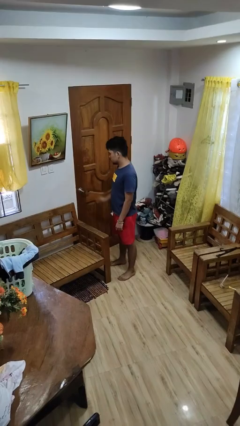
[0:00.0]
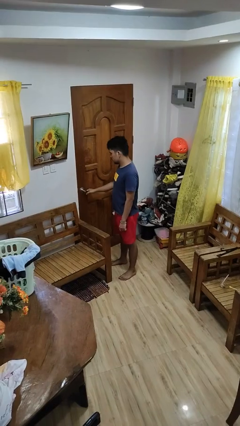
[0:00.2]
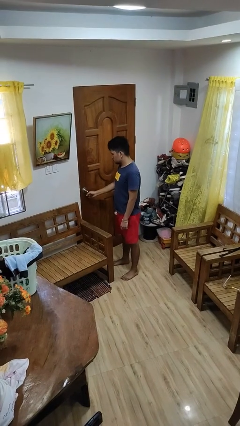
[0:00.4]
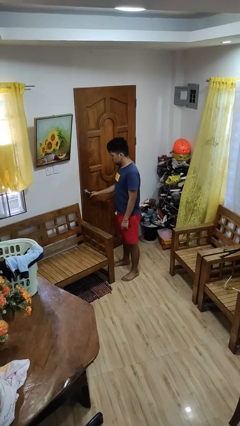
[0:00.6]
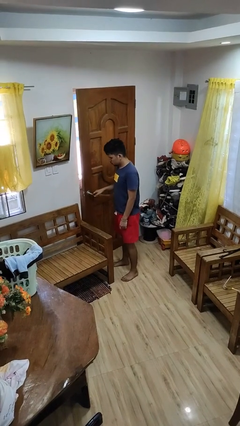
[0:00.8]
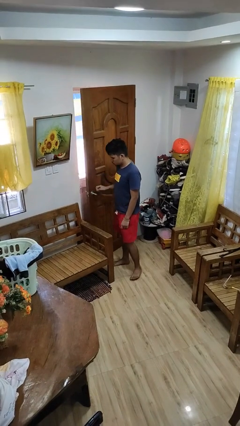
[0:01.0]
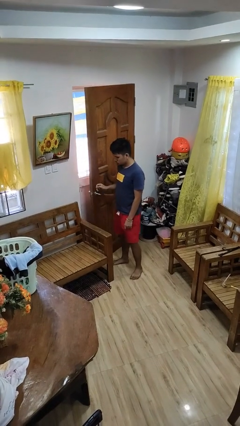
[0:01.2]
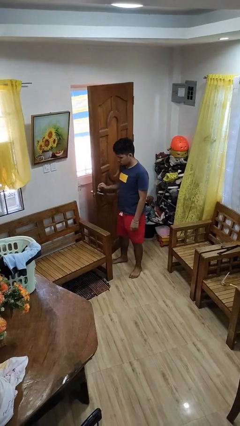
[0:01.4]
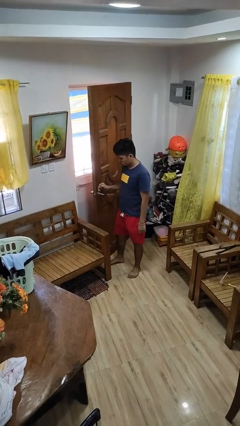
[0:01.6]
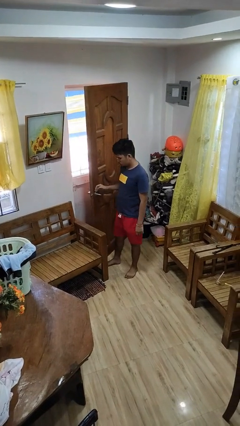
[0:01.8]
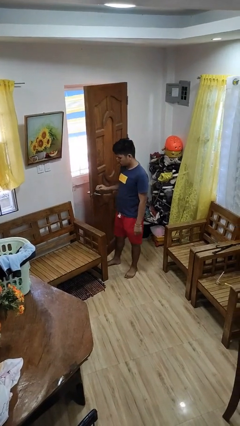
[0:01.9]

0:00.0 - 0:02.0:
person opens facility door

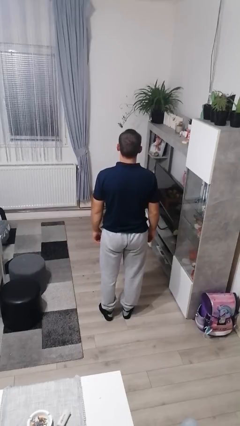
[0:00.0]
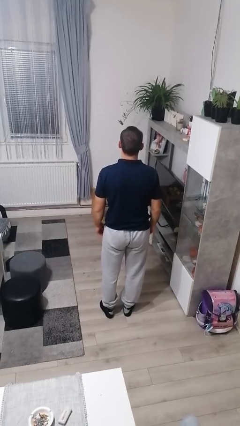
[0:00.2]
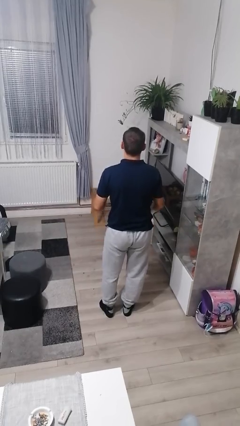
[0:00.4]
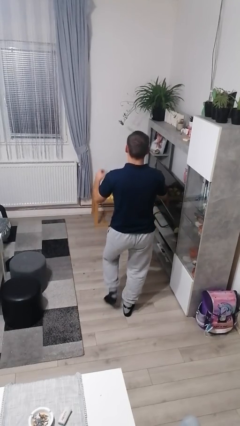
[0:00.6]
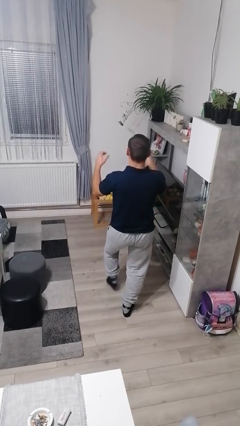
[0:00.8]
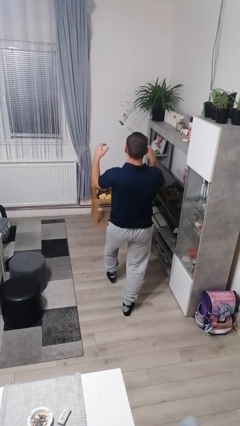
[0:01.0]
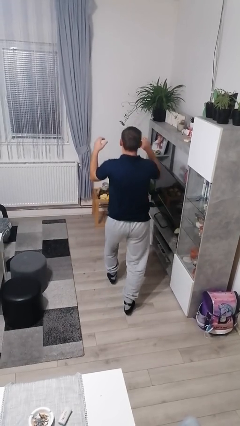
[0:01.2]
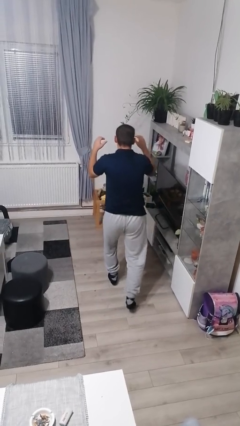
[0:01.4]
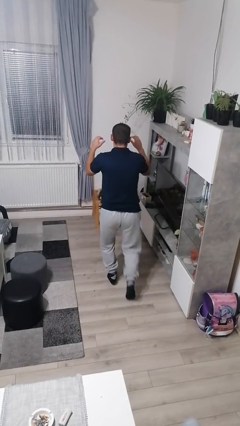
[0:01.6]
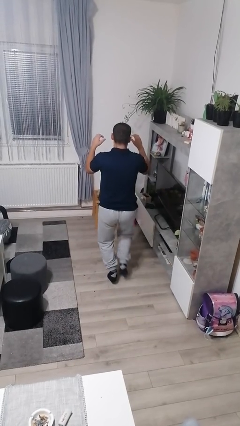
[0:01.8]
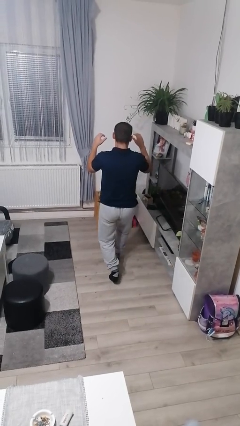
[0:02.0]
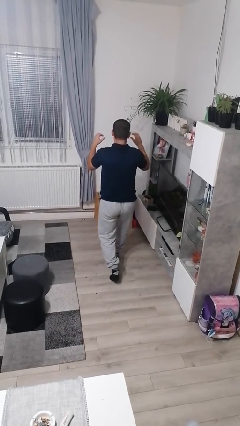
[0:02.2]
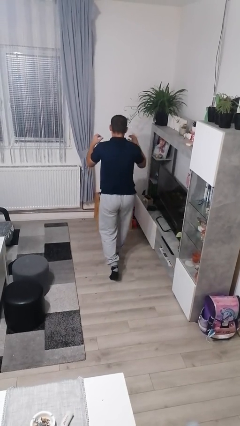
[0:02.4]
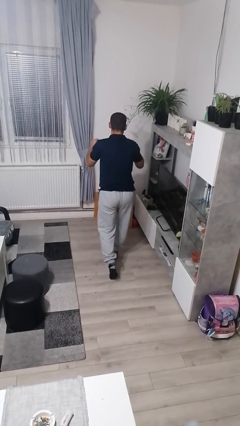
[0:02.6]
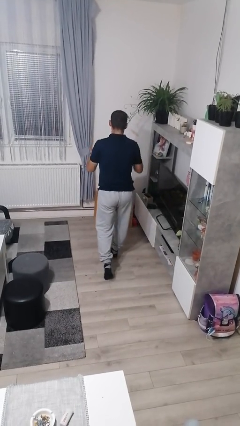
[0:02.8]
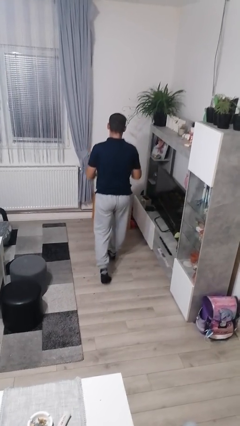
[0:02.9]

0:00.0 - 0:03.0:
person walks tiptoe

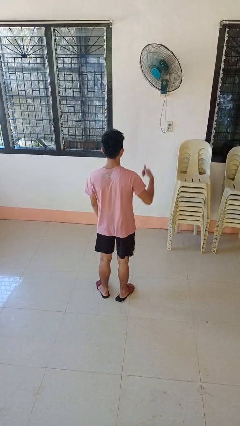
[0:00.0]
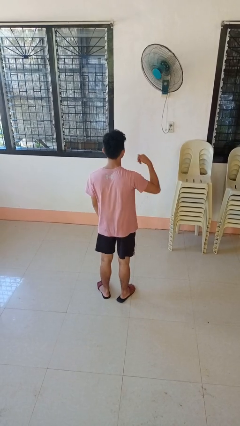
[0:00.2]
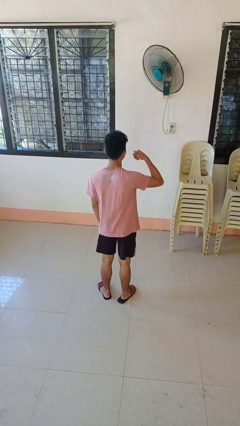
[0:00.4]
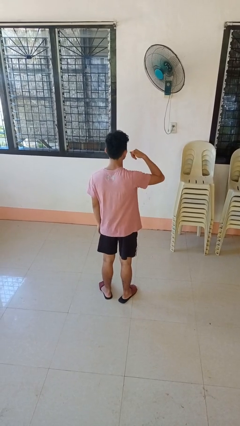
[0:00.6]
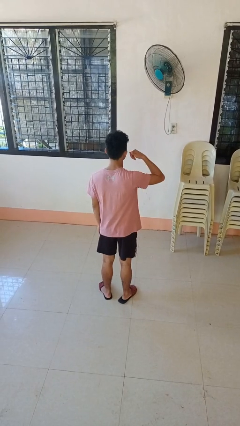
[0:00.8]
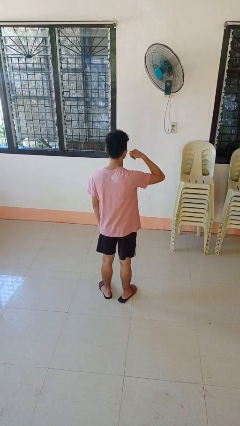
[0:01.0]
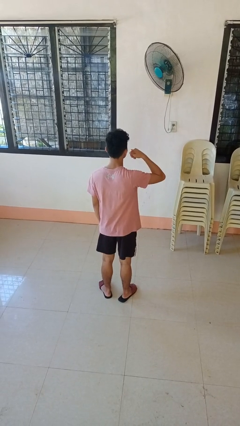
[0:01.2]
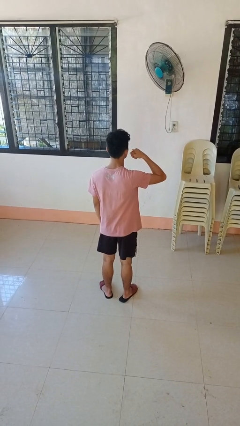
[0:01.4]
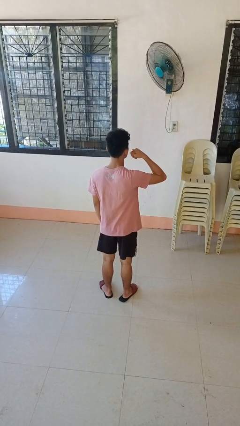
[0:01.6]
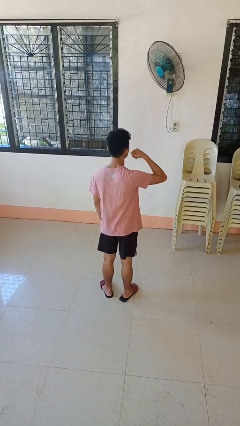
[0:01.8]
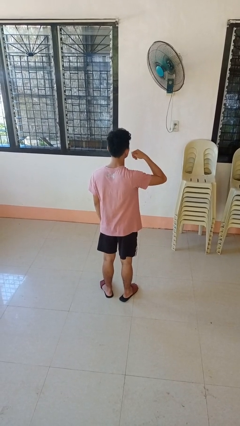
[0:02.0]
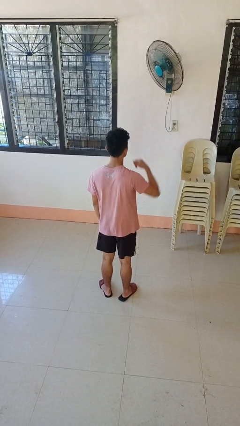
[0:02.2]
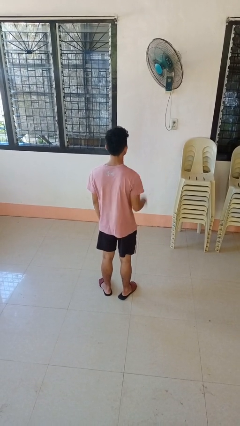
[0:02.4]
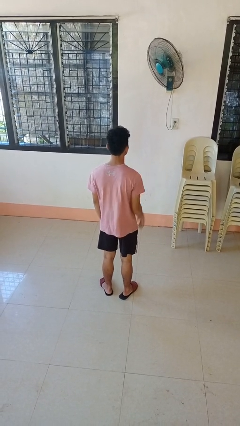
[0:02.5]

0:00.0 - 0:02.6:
person gestures call me

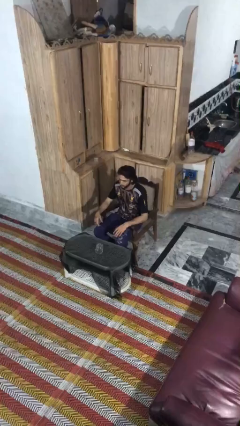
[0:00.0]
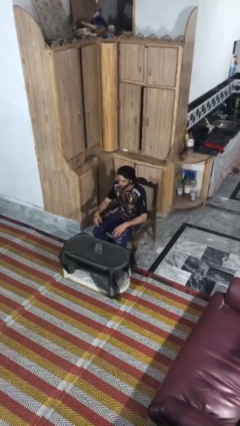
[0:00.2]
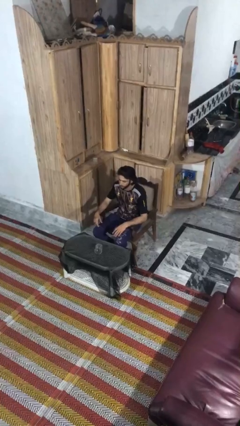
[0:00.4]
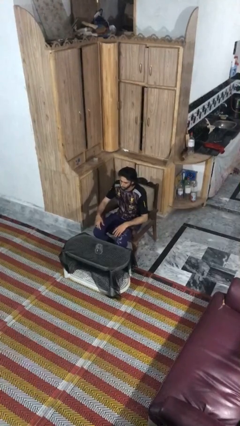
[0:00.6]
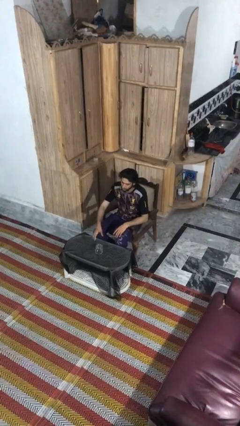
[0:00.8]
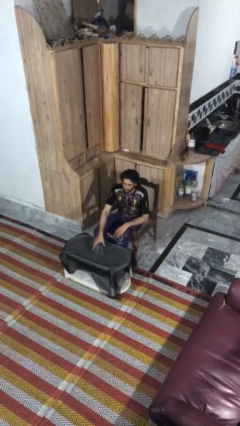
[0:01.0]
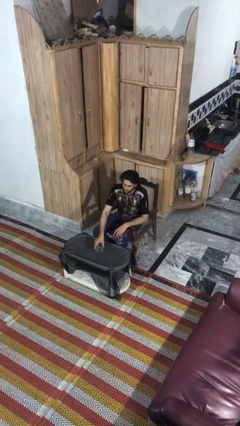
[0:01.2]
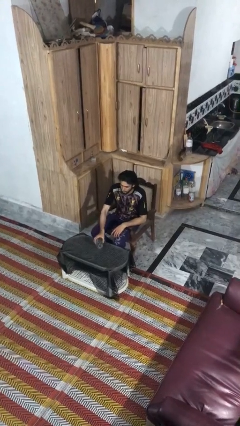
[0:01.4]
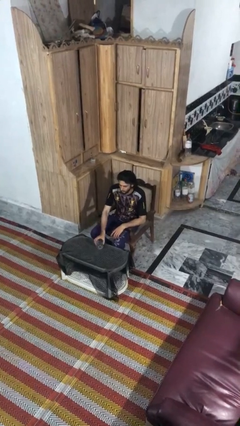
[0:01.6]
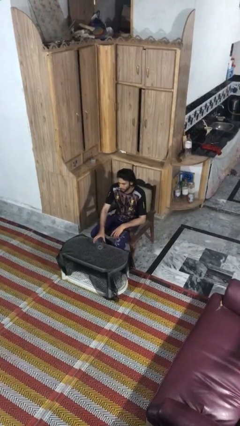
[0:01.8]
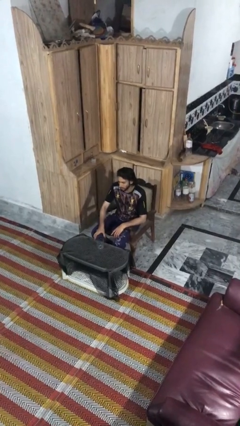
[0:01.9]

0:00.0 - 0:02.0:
person sets upright glass

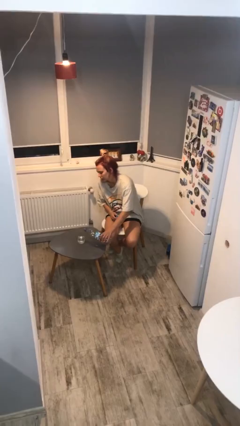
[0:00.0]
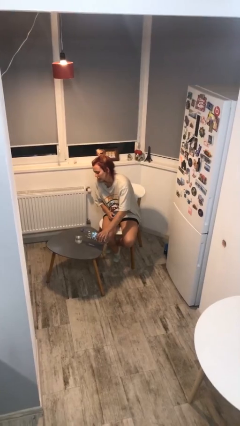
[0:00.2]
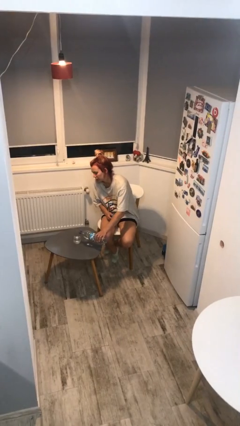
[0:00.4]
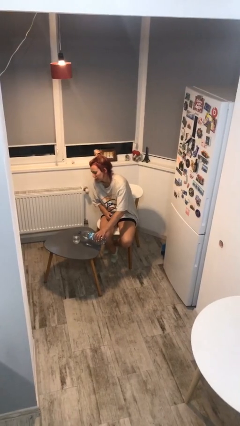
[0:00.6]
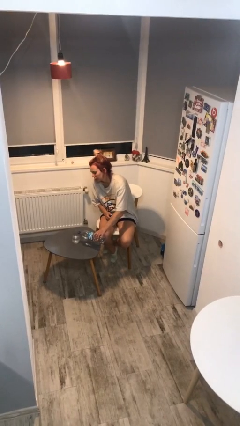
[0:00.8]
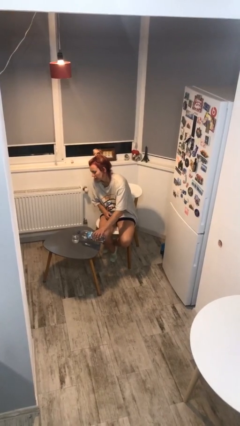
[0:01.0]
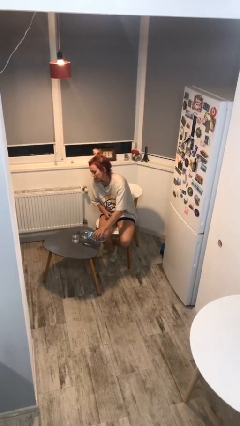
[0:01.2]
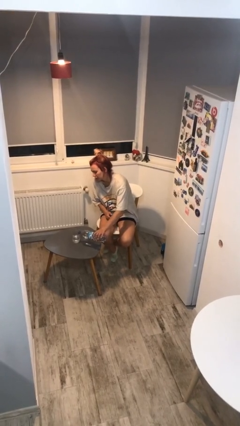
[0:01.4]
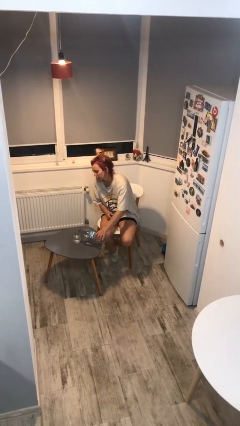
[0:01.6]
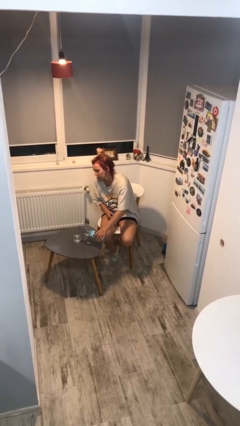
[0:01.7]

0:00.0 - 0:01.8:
person pours liquid into cup

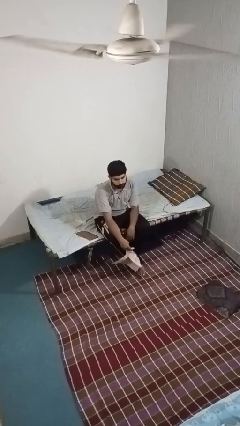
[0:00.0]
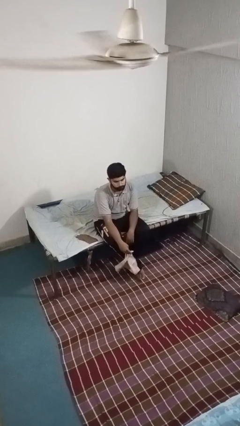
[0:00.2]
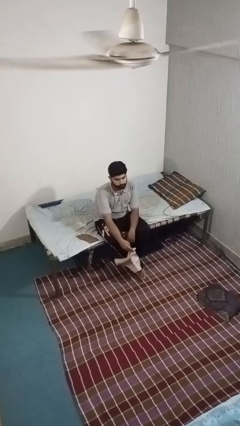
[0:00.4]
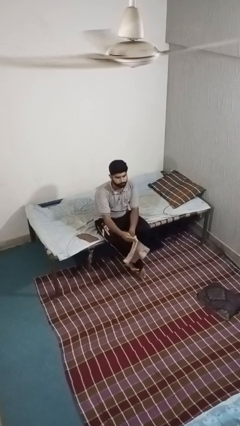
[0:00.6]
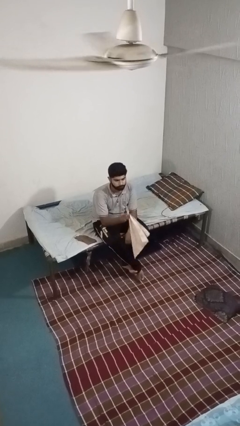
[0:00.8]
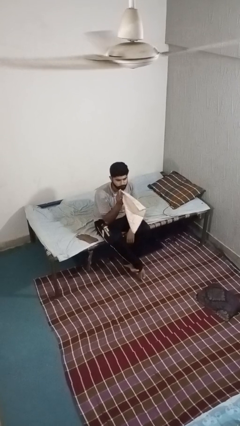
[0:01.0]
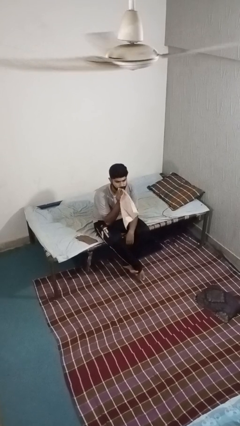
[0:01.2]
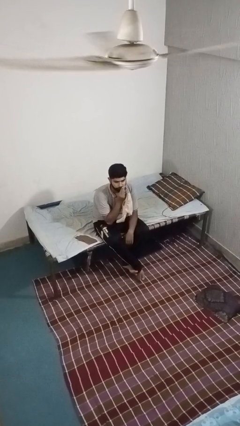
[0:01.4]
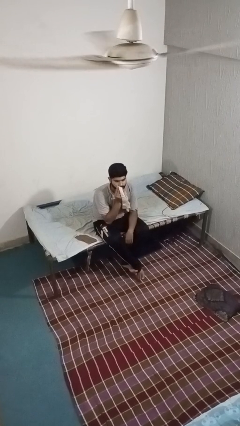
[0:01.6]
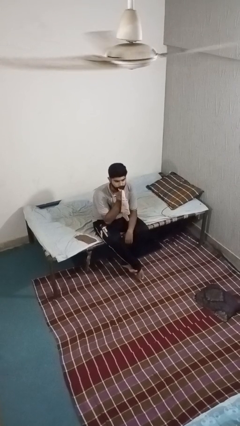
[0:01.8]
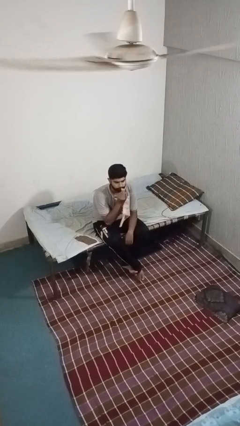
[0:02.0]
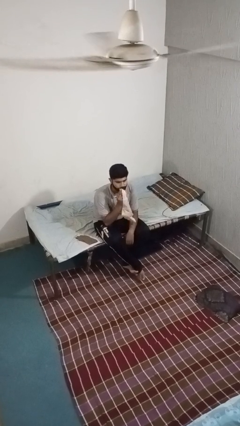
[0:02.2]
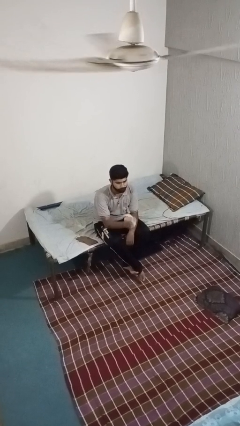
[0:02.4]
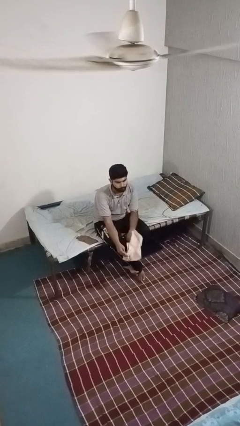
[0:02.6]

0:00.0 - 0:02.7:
person wipes mouth with napkin

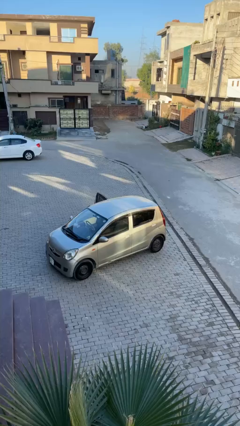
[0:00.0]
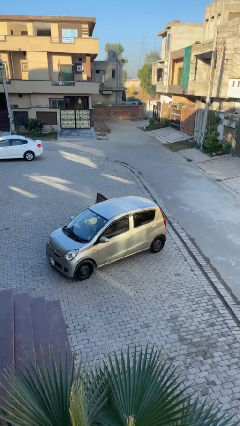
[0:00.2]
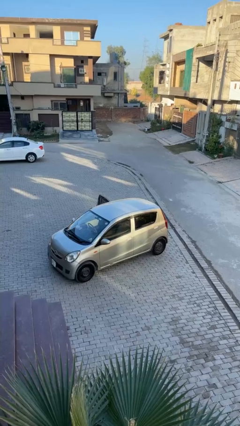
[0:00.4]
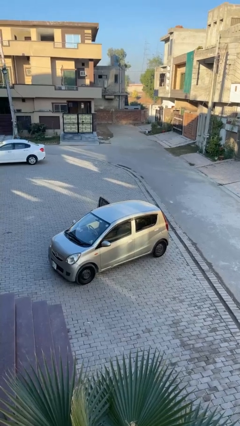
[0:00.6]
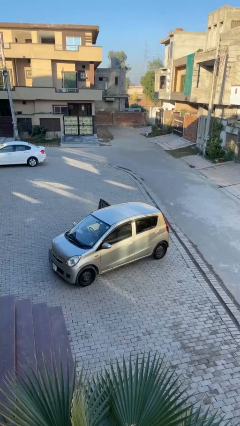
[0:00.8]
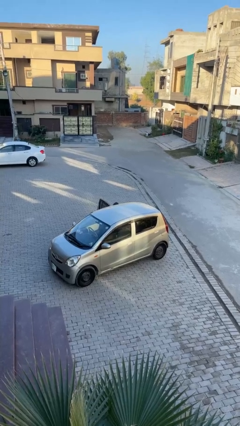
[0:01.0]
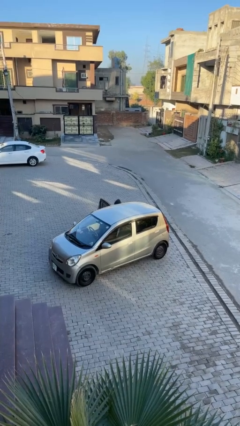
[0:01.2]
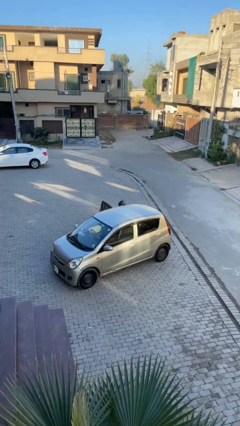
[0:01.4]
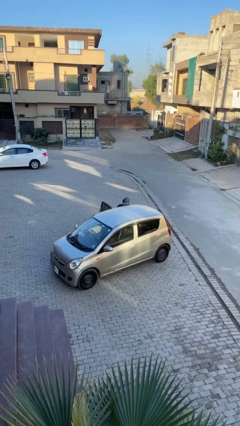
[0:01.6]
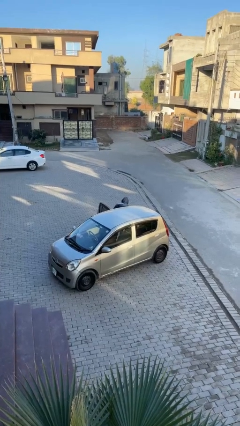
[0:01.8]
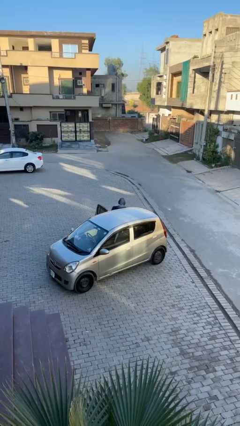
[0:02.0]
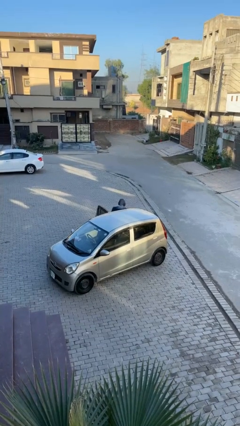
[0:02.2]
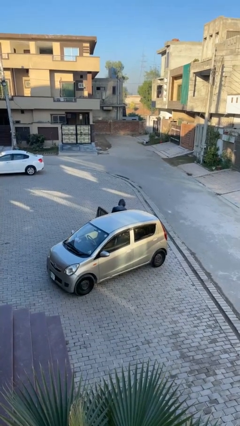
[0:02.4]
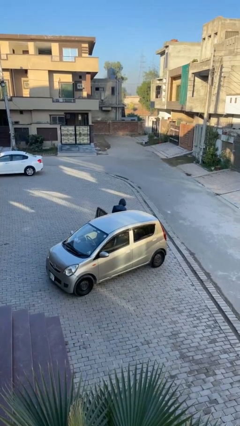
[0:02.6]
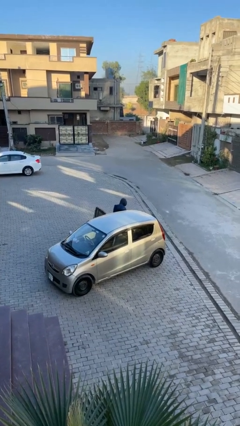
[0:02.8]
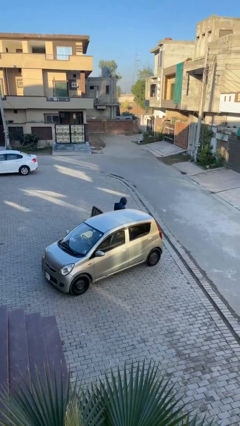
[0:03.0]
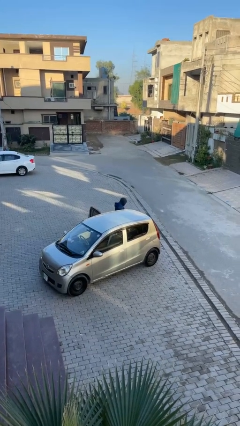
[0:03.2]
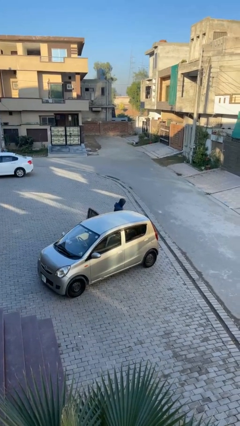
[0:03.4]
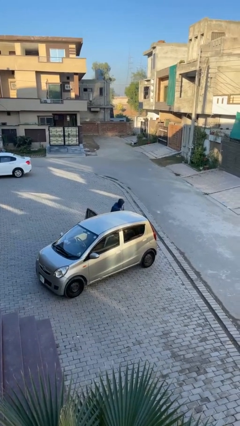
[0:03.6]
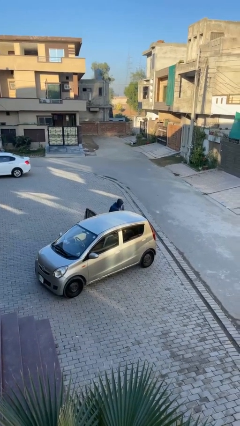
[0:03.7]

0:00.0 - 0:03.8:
person exits car
